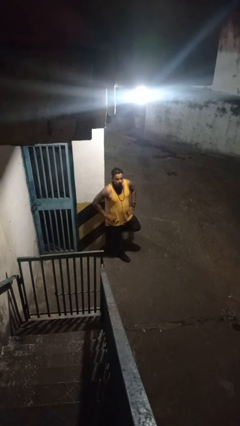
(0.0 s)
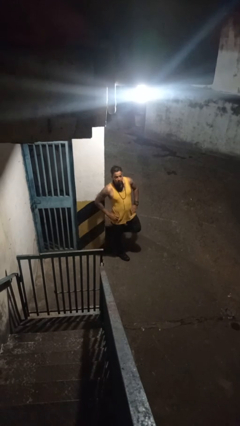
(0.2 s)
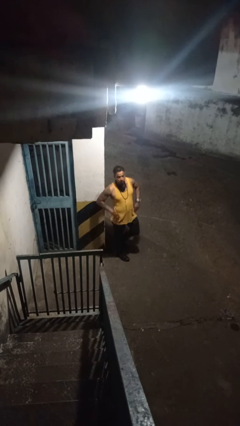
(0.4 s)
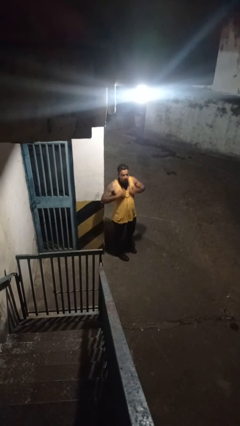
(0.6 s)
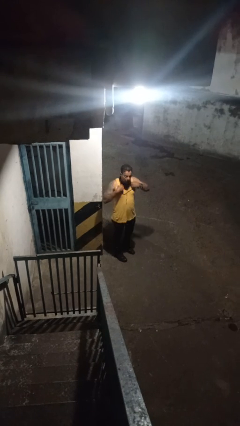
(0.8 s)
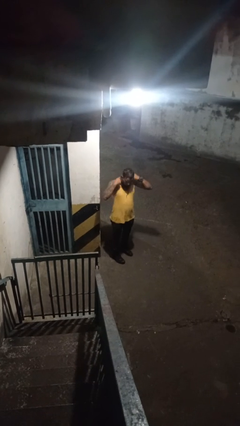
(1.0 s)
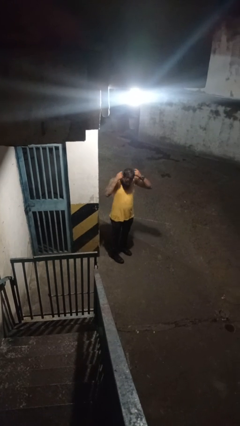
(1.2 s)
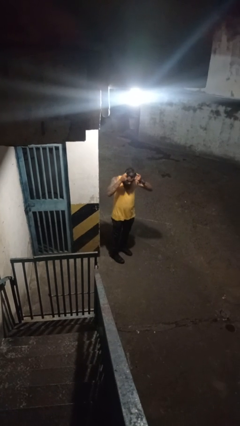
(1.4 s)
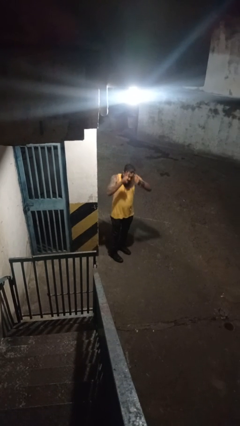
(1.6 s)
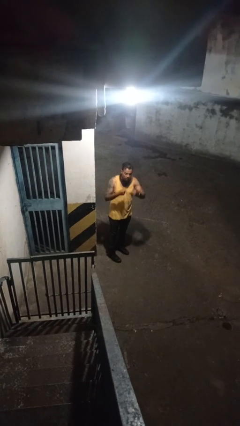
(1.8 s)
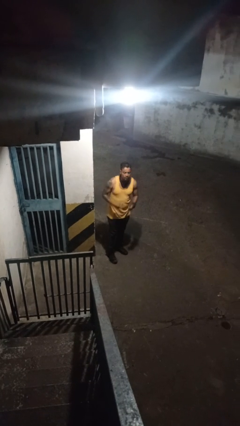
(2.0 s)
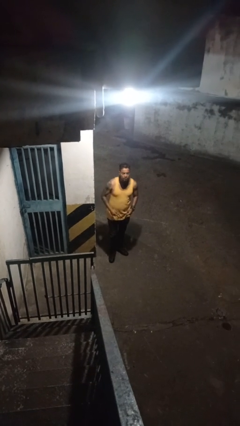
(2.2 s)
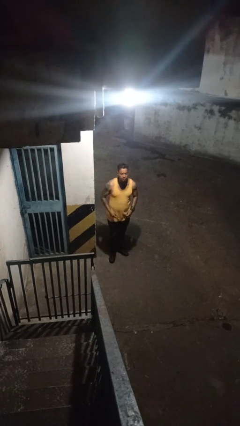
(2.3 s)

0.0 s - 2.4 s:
person takes off necklace

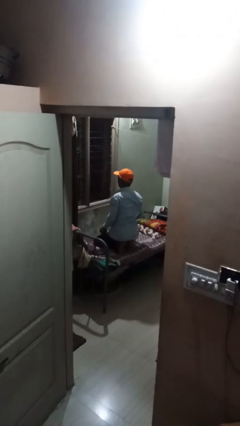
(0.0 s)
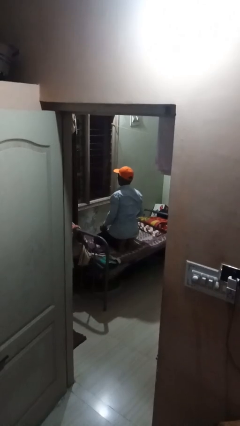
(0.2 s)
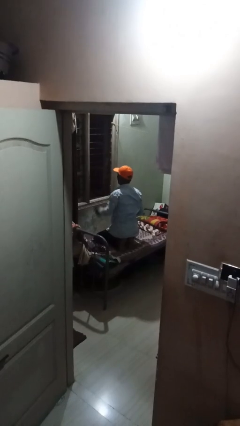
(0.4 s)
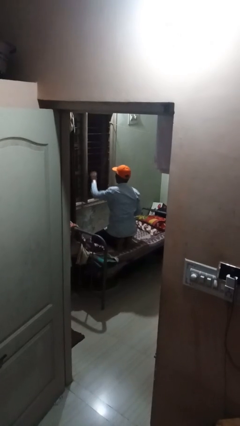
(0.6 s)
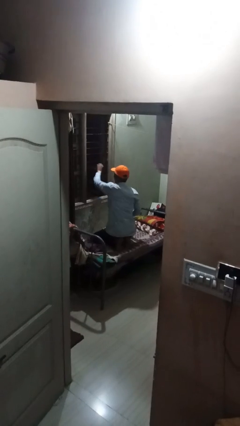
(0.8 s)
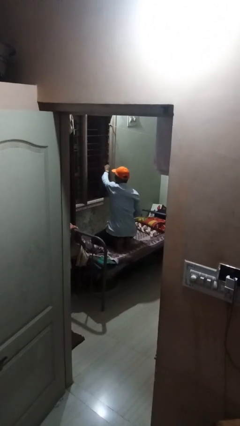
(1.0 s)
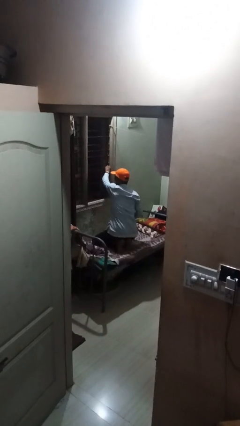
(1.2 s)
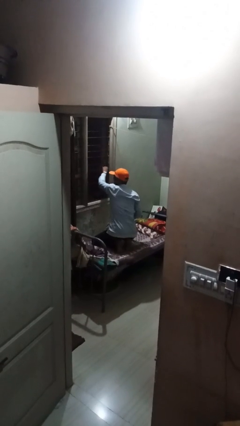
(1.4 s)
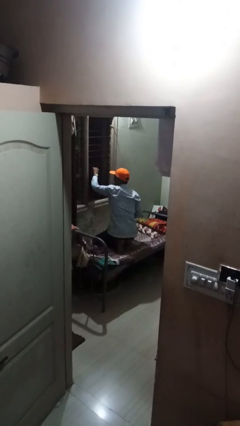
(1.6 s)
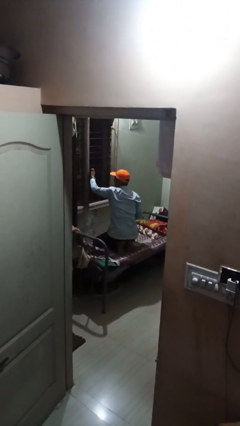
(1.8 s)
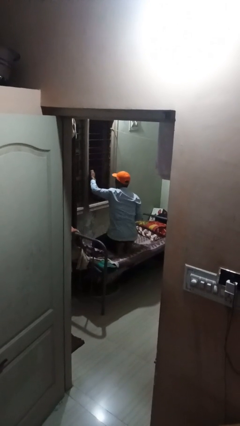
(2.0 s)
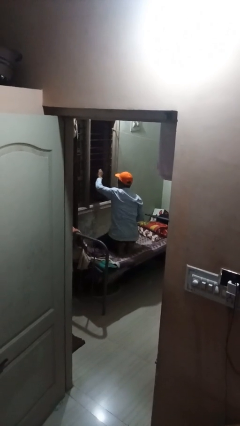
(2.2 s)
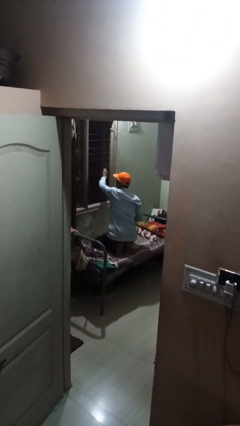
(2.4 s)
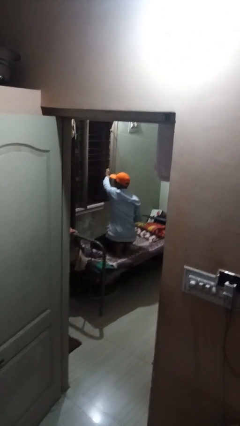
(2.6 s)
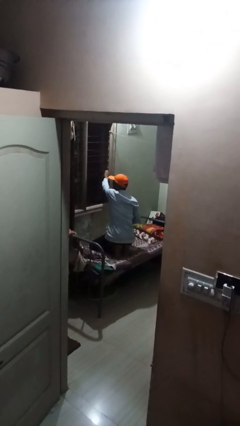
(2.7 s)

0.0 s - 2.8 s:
person washes window

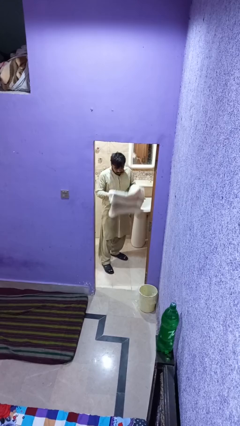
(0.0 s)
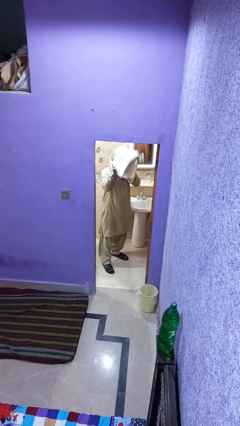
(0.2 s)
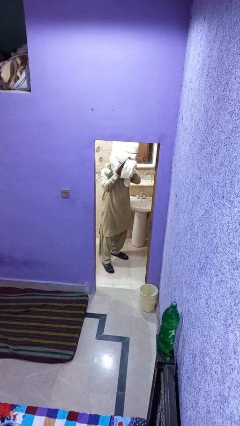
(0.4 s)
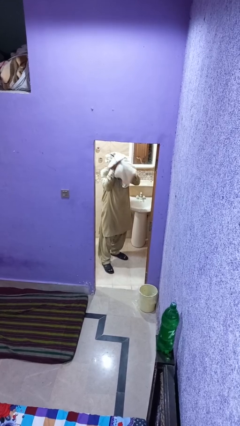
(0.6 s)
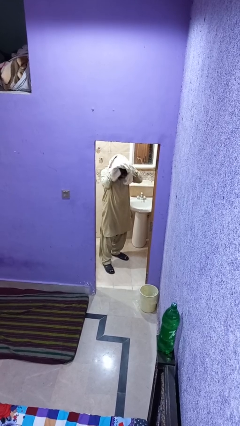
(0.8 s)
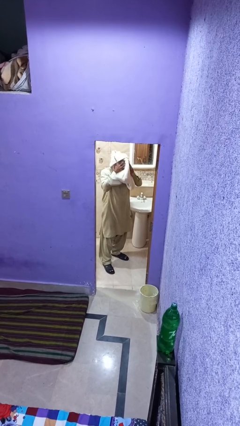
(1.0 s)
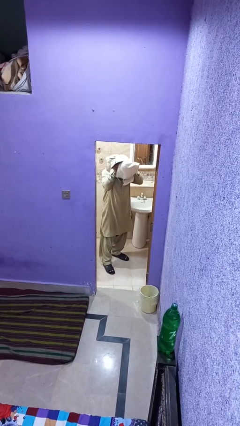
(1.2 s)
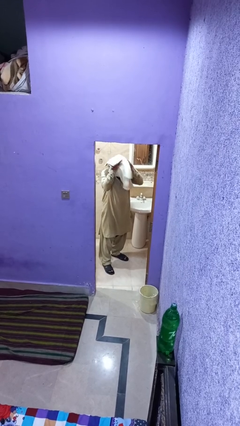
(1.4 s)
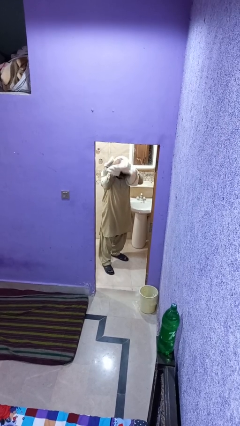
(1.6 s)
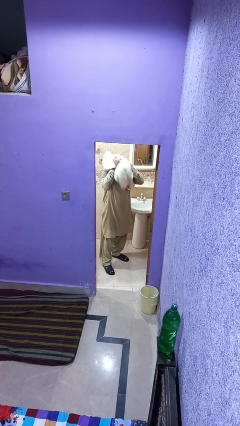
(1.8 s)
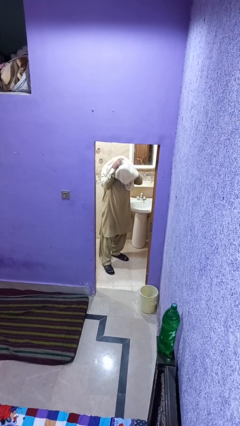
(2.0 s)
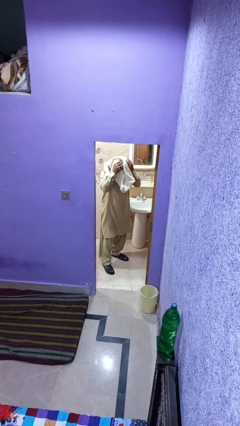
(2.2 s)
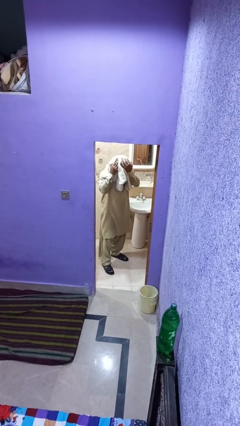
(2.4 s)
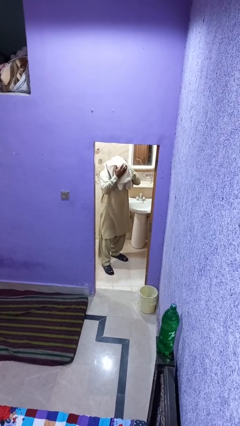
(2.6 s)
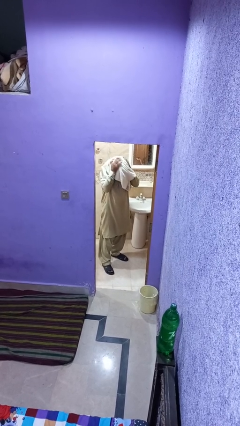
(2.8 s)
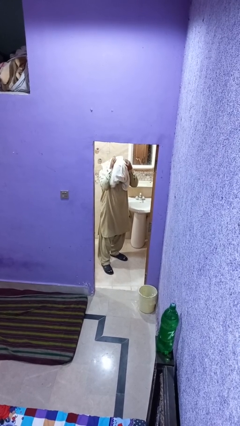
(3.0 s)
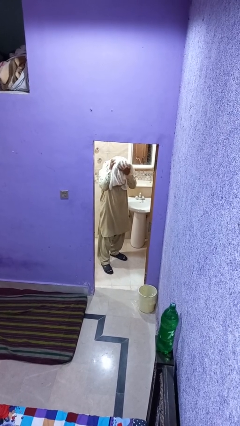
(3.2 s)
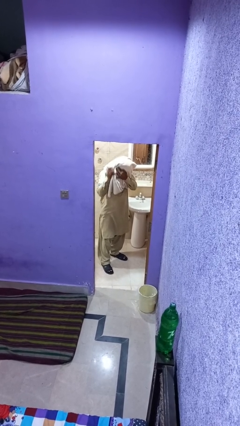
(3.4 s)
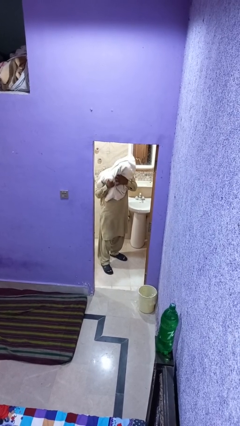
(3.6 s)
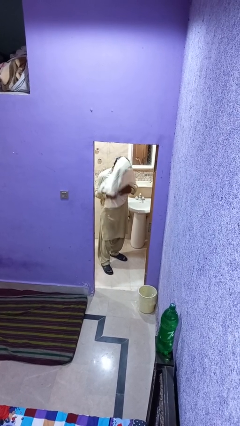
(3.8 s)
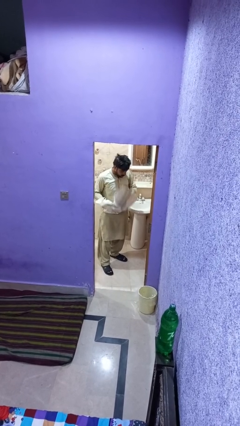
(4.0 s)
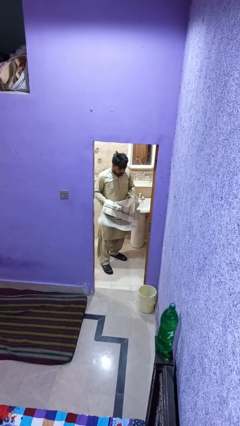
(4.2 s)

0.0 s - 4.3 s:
person dries hair with towel

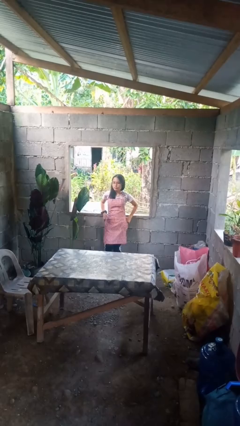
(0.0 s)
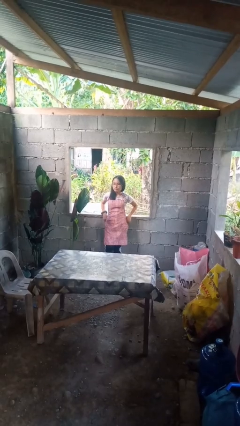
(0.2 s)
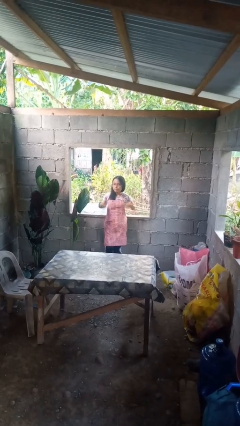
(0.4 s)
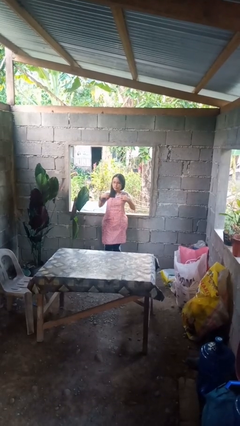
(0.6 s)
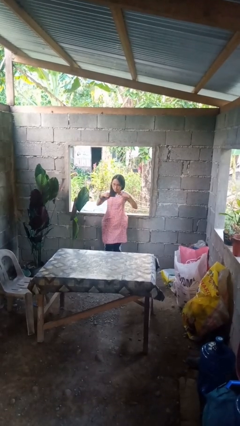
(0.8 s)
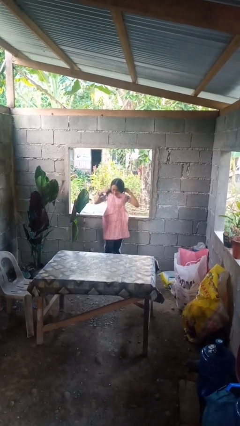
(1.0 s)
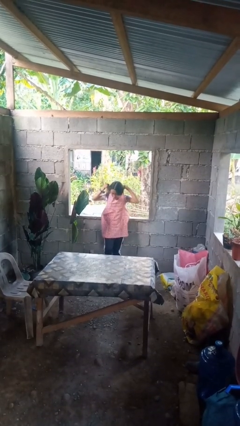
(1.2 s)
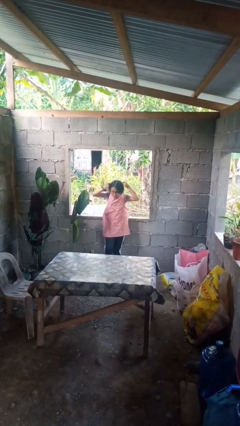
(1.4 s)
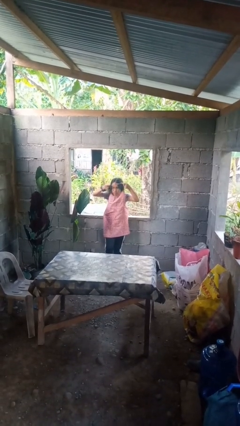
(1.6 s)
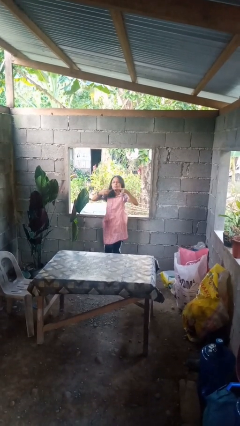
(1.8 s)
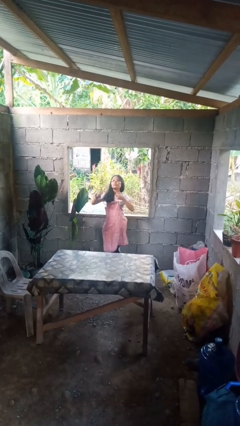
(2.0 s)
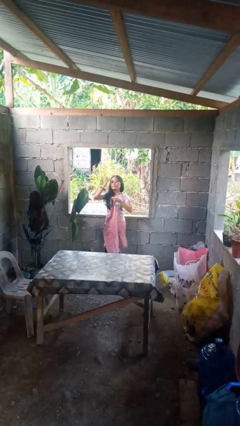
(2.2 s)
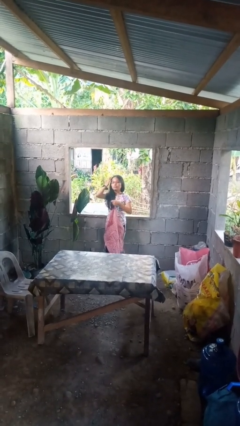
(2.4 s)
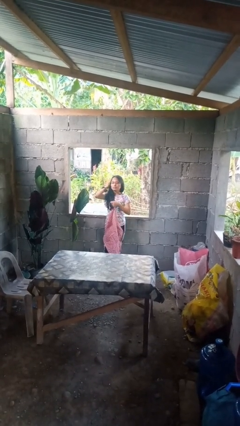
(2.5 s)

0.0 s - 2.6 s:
person takes off apron

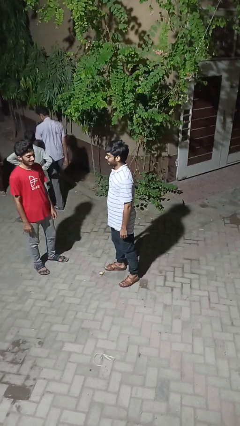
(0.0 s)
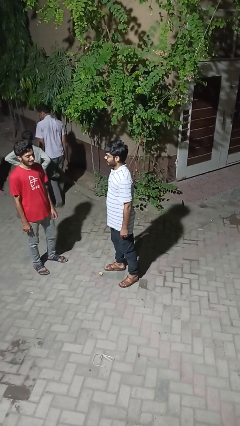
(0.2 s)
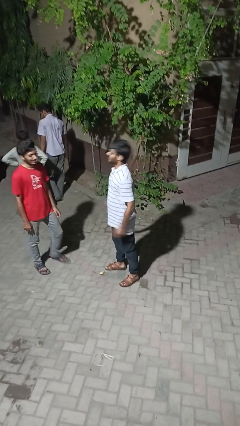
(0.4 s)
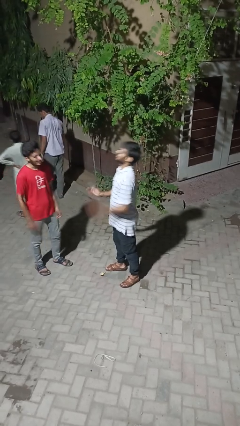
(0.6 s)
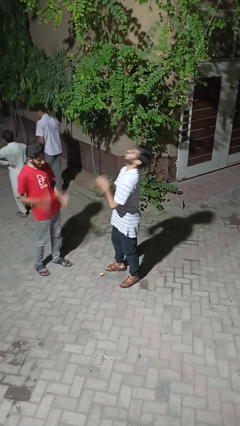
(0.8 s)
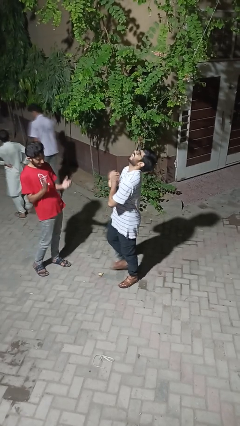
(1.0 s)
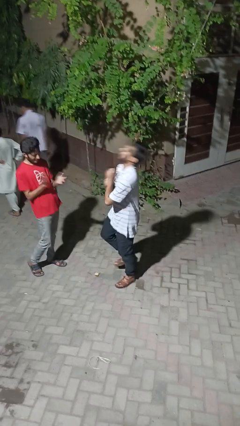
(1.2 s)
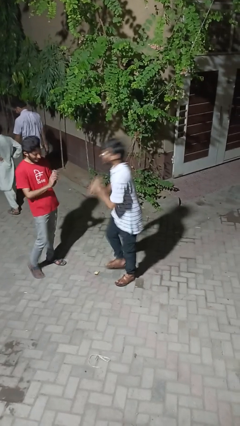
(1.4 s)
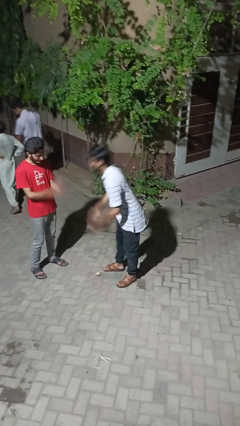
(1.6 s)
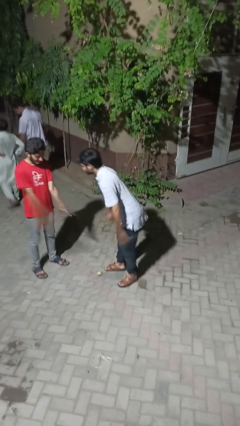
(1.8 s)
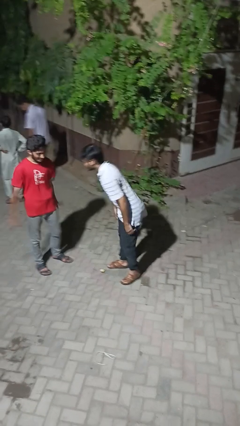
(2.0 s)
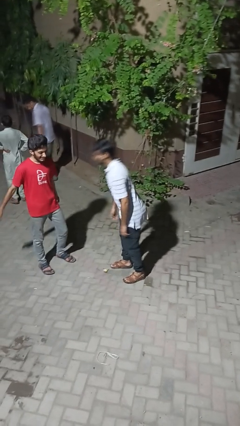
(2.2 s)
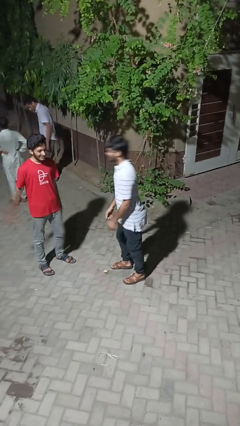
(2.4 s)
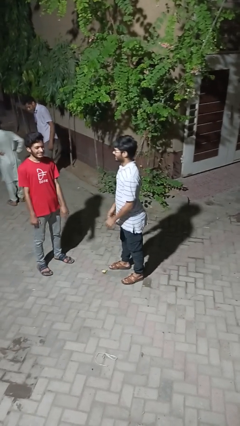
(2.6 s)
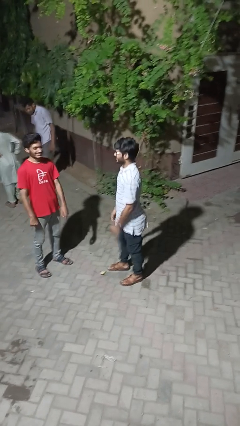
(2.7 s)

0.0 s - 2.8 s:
person laughs with person

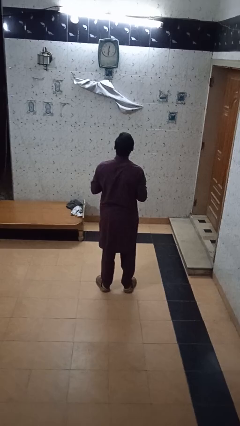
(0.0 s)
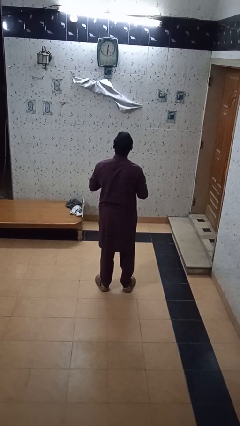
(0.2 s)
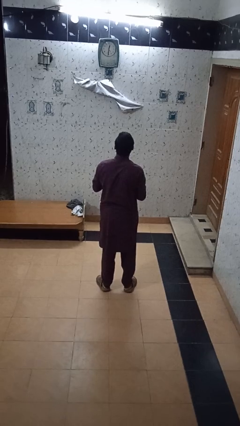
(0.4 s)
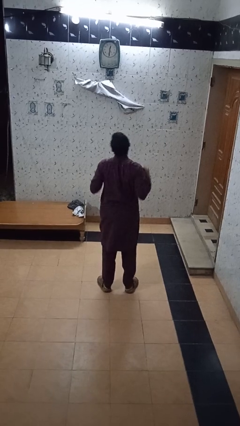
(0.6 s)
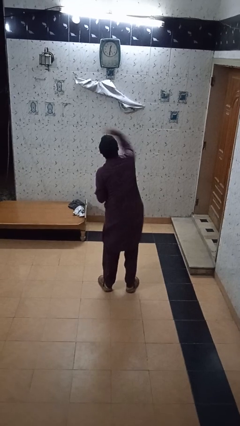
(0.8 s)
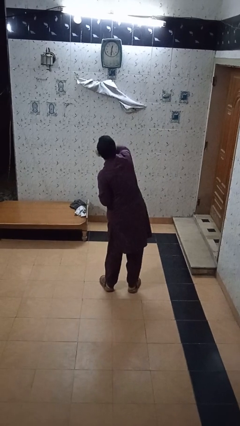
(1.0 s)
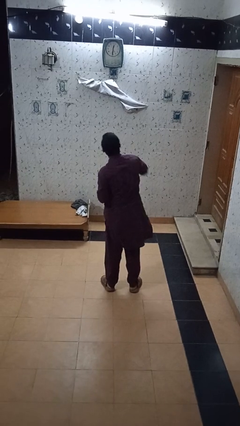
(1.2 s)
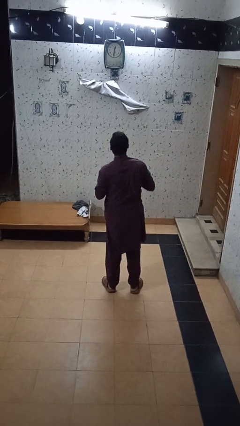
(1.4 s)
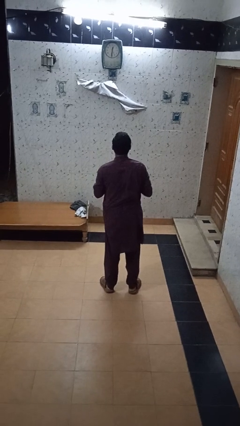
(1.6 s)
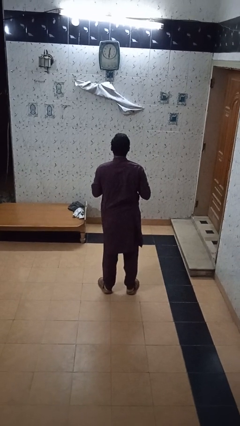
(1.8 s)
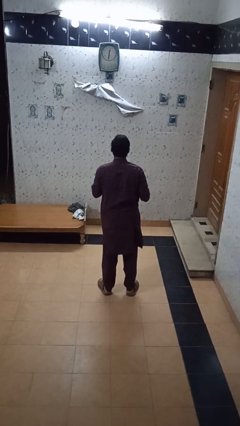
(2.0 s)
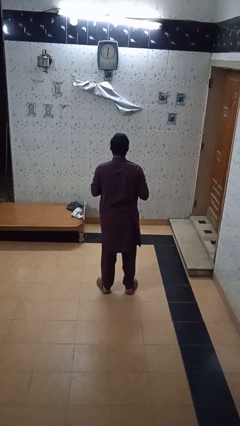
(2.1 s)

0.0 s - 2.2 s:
person punches

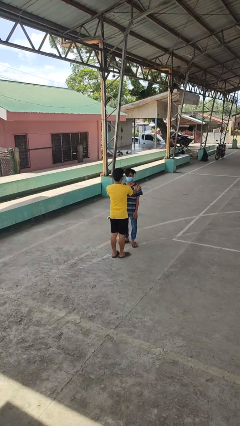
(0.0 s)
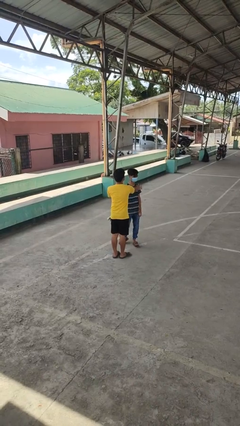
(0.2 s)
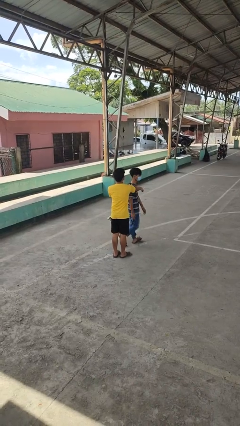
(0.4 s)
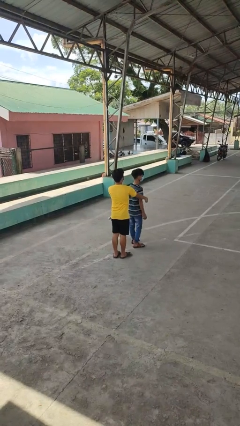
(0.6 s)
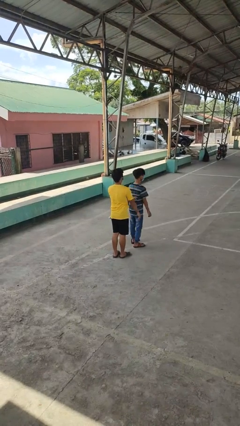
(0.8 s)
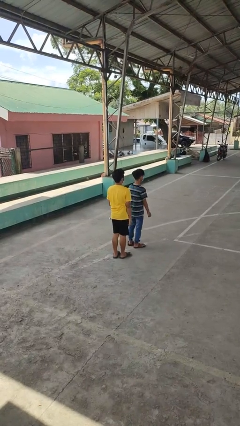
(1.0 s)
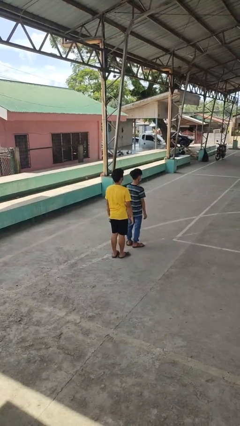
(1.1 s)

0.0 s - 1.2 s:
person spins person around
